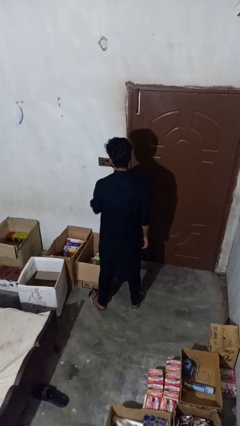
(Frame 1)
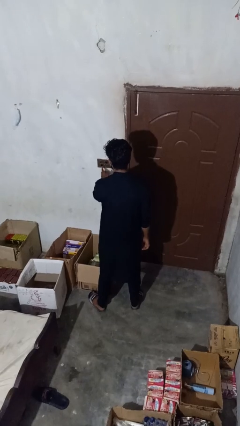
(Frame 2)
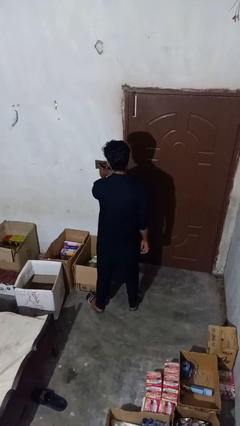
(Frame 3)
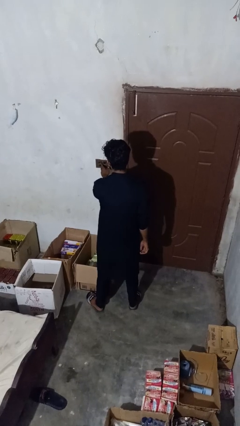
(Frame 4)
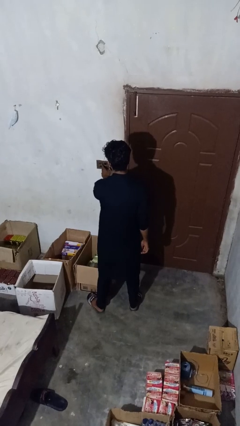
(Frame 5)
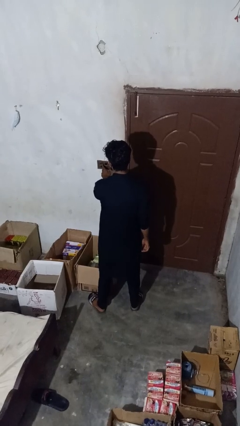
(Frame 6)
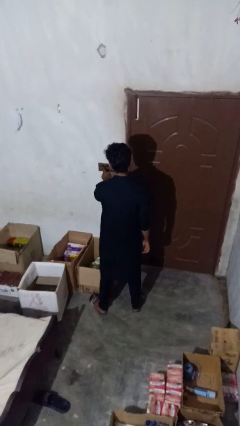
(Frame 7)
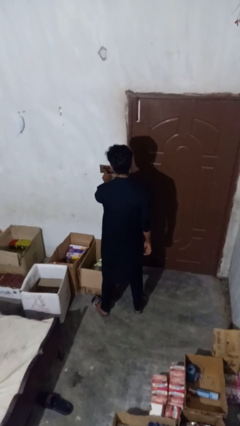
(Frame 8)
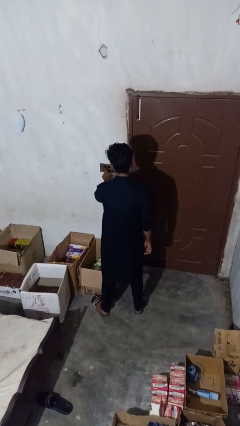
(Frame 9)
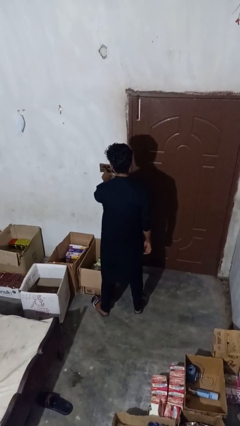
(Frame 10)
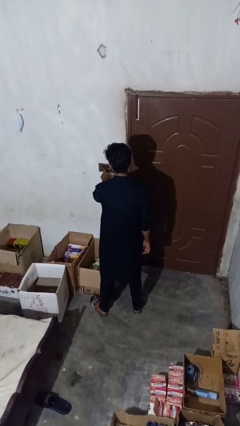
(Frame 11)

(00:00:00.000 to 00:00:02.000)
person turns on fan

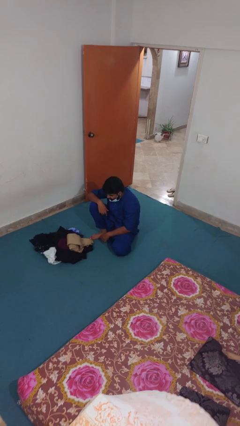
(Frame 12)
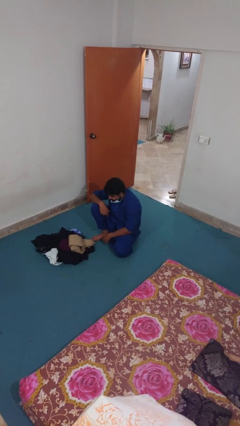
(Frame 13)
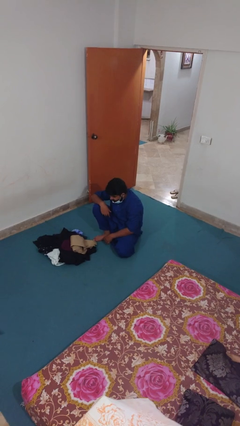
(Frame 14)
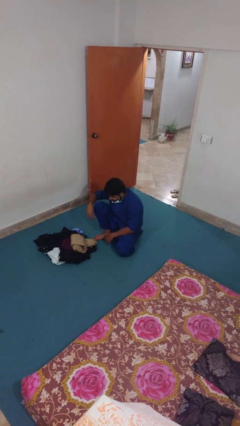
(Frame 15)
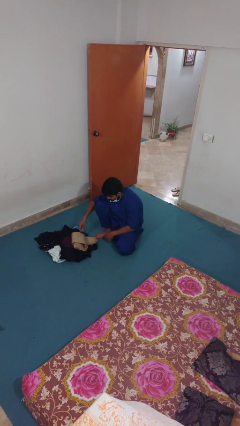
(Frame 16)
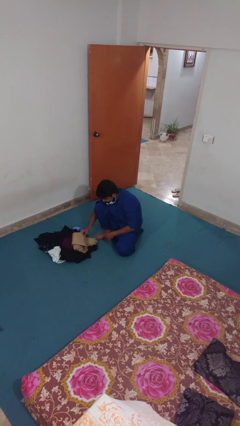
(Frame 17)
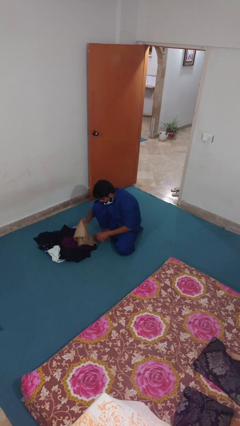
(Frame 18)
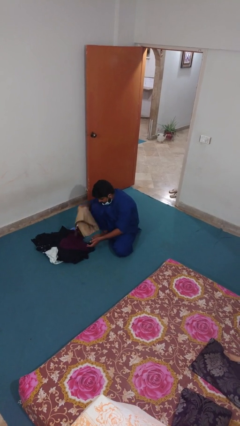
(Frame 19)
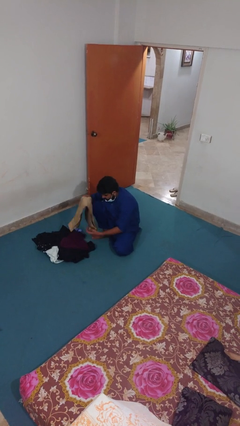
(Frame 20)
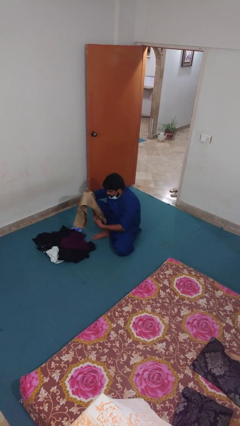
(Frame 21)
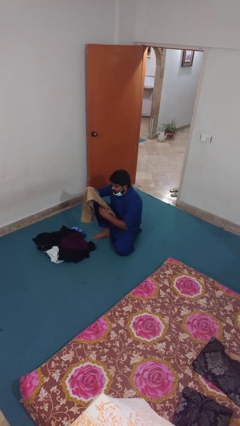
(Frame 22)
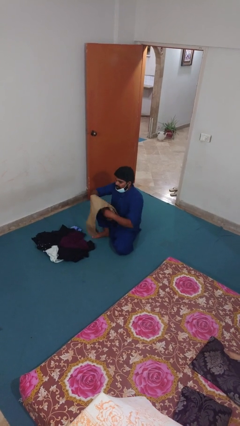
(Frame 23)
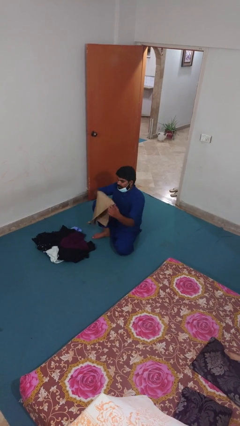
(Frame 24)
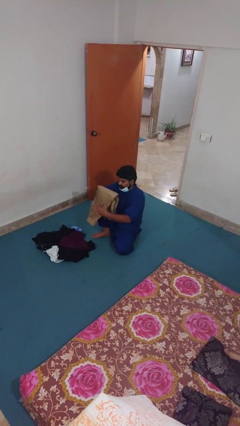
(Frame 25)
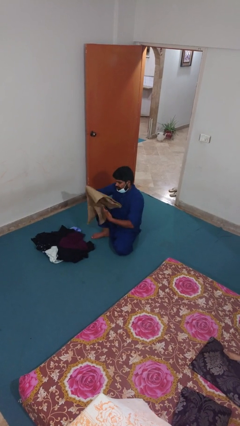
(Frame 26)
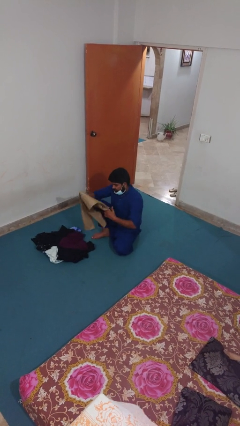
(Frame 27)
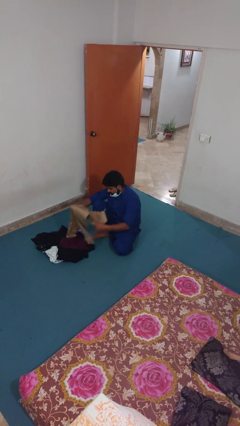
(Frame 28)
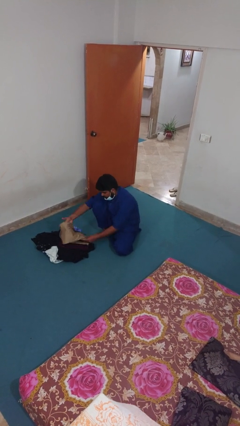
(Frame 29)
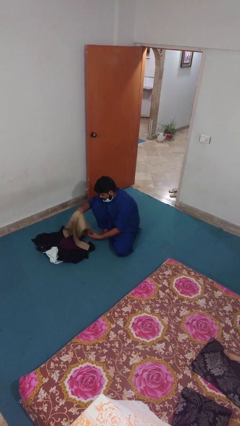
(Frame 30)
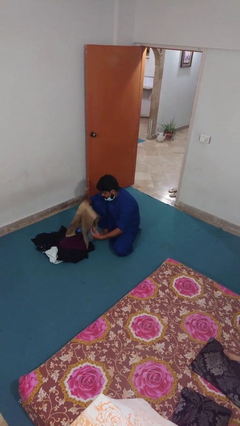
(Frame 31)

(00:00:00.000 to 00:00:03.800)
person folds pants

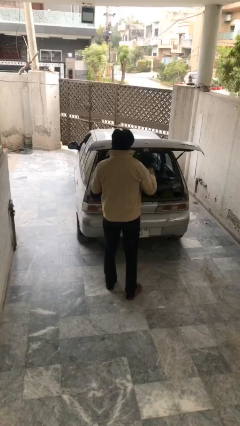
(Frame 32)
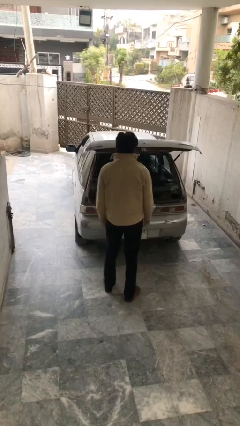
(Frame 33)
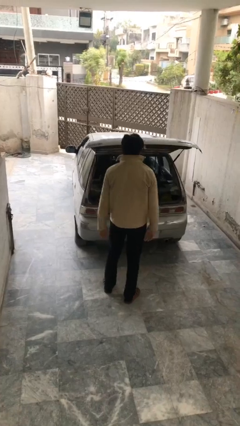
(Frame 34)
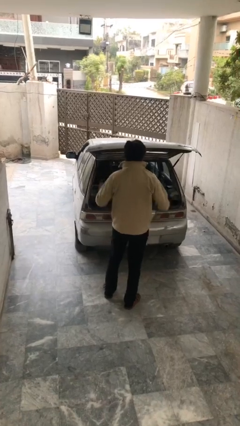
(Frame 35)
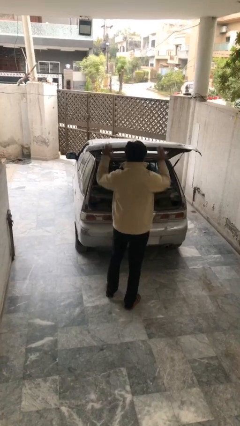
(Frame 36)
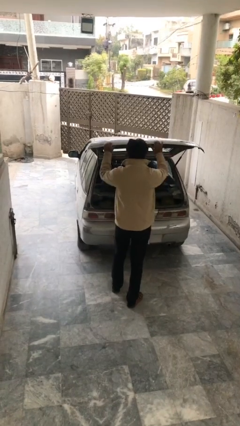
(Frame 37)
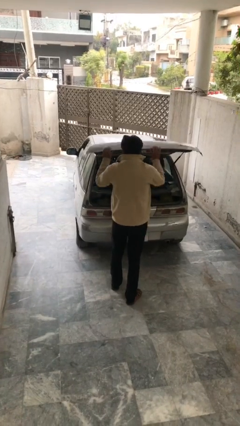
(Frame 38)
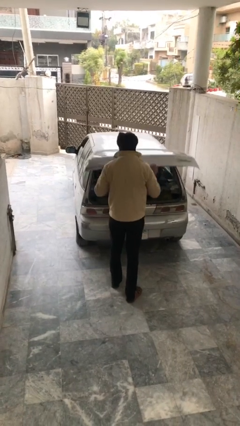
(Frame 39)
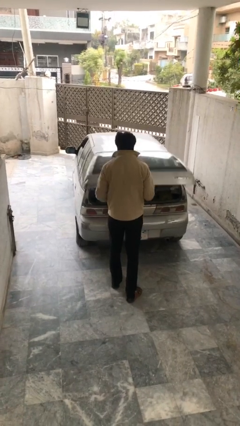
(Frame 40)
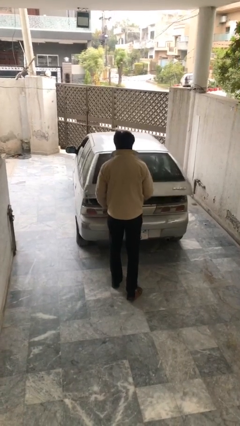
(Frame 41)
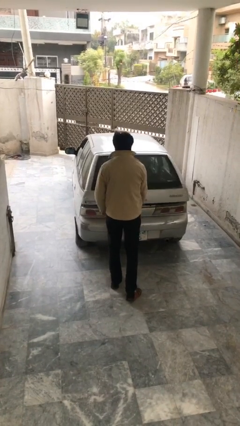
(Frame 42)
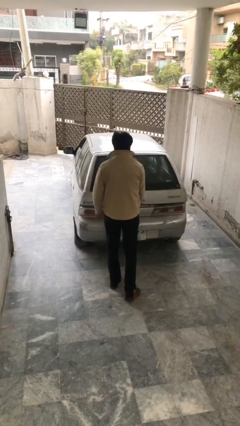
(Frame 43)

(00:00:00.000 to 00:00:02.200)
person closes car trunk

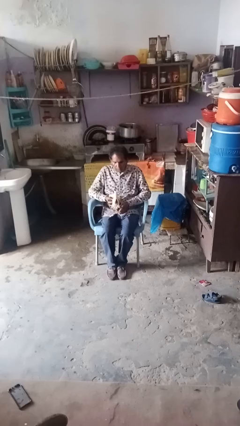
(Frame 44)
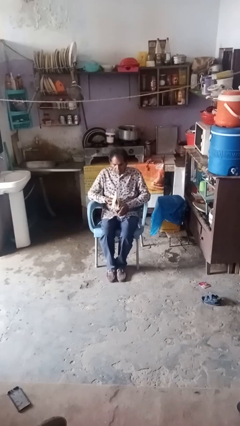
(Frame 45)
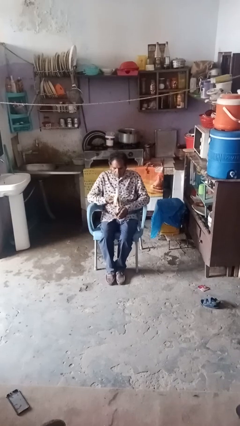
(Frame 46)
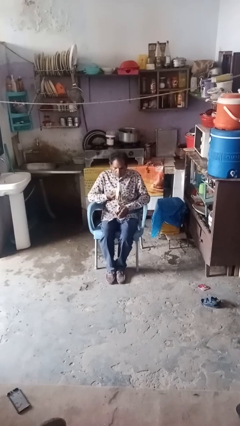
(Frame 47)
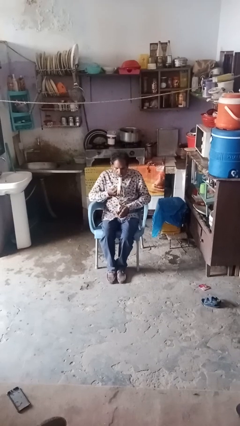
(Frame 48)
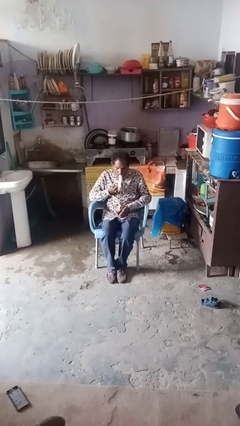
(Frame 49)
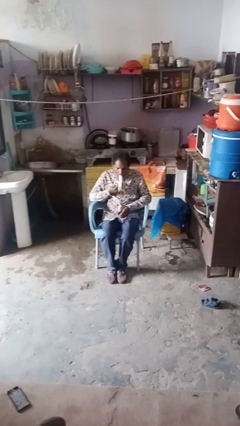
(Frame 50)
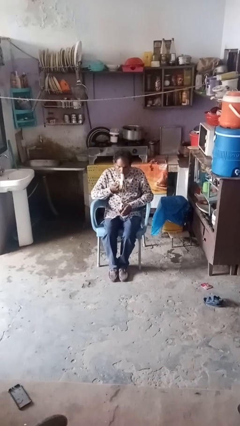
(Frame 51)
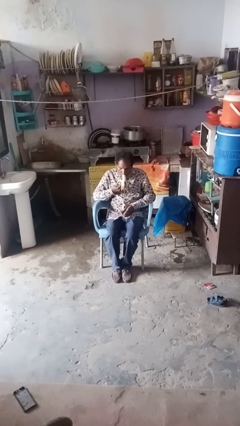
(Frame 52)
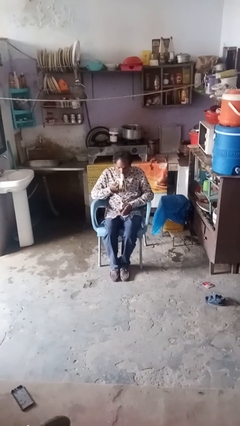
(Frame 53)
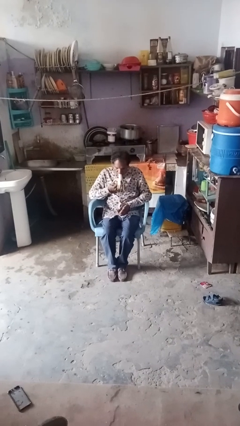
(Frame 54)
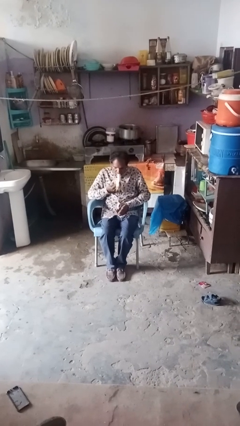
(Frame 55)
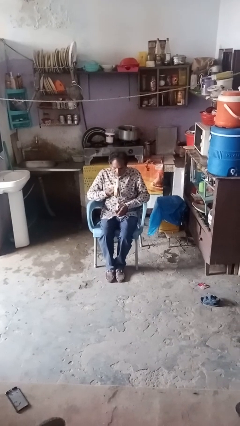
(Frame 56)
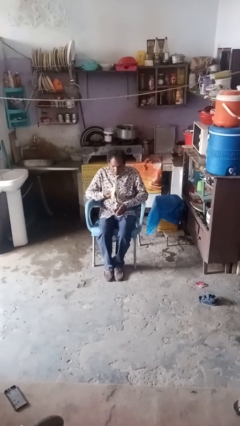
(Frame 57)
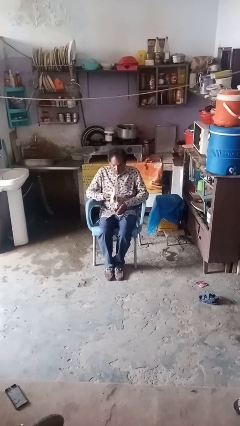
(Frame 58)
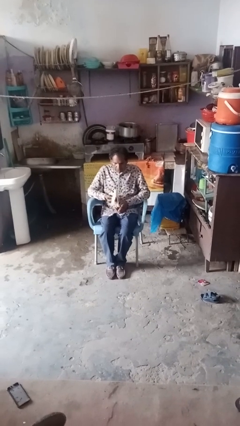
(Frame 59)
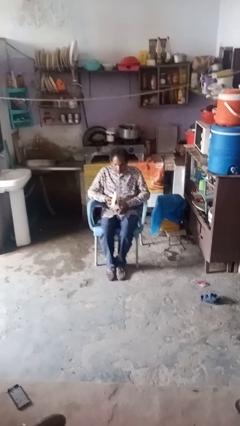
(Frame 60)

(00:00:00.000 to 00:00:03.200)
person eats banana

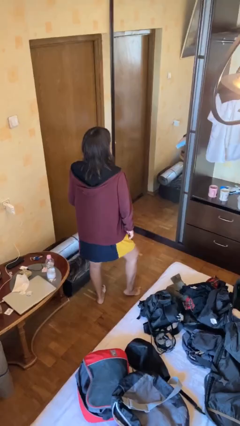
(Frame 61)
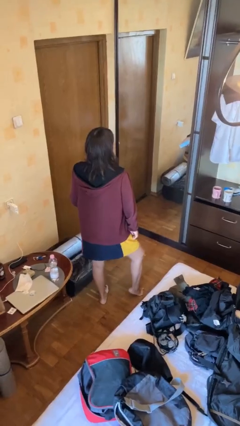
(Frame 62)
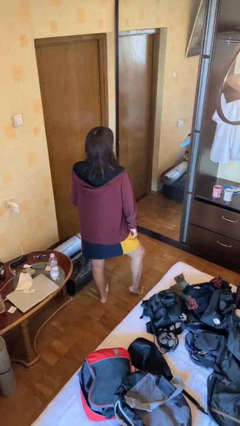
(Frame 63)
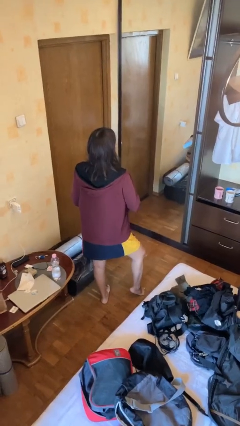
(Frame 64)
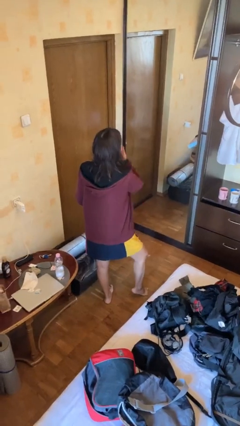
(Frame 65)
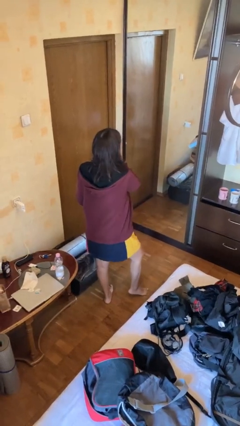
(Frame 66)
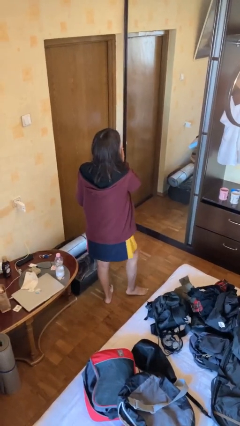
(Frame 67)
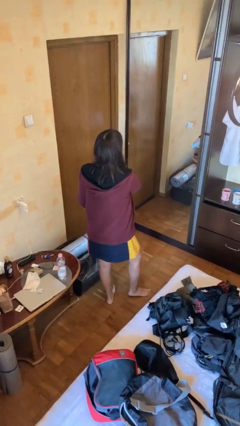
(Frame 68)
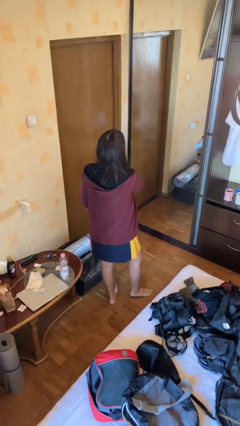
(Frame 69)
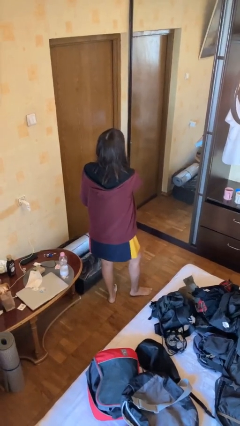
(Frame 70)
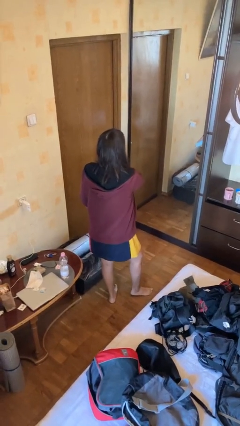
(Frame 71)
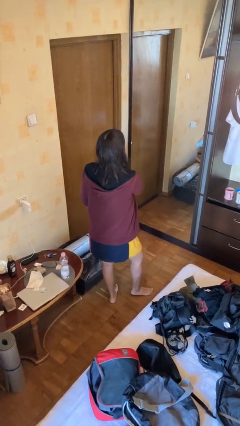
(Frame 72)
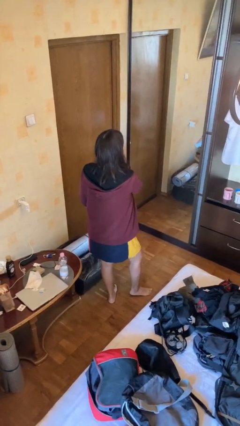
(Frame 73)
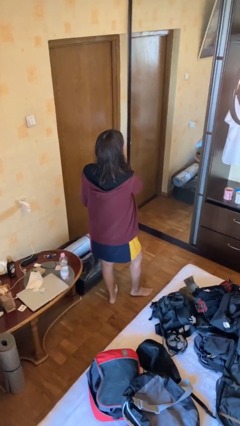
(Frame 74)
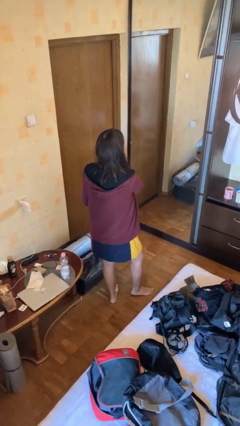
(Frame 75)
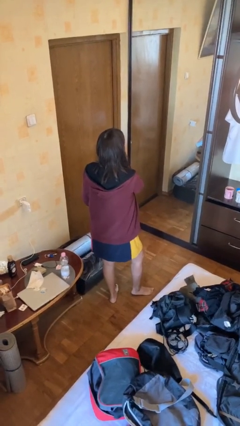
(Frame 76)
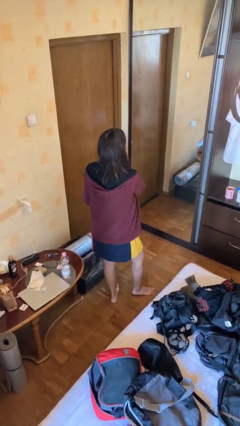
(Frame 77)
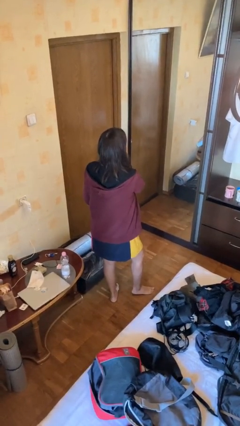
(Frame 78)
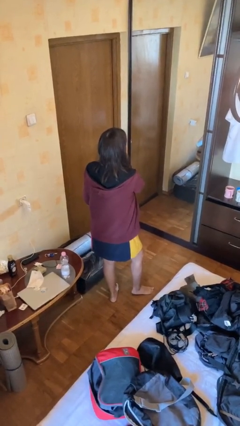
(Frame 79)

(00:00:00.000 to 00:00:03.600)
person scratches face

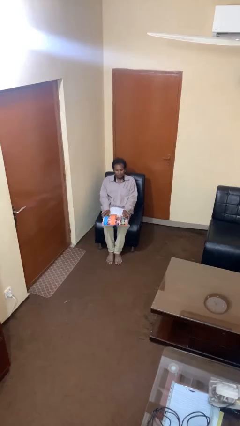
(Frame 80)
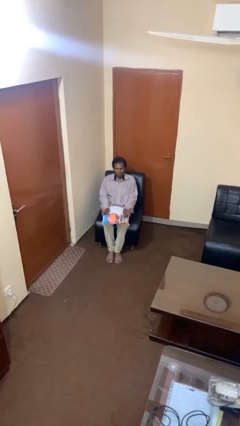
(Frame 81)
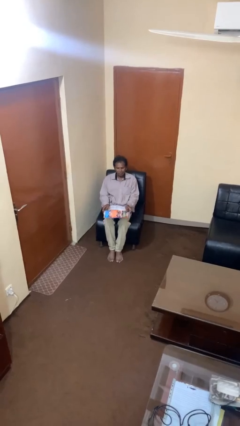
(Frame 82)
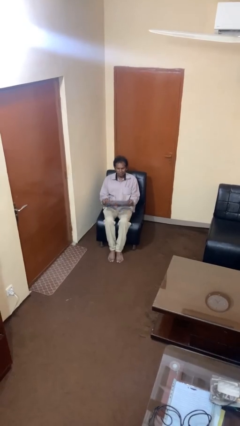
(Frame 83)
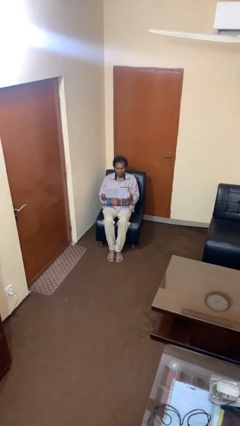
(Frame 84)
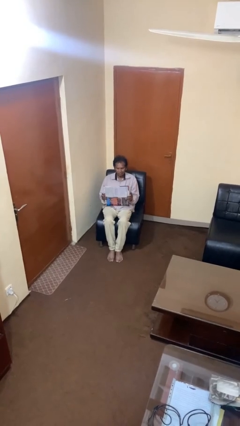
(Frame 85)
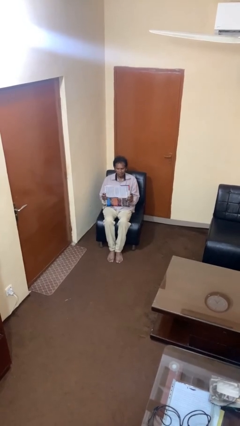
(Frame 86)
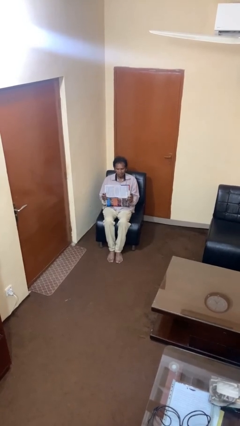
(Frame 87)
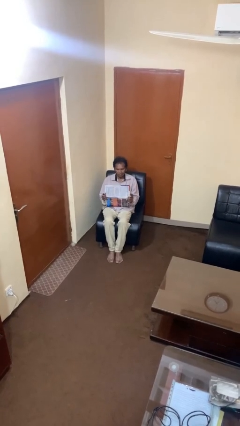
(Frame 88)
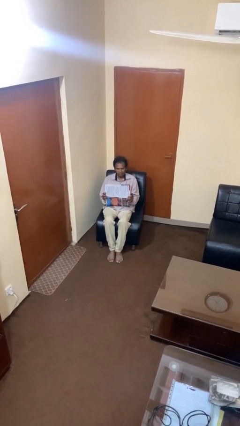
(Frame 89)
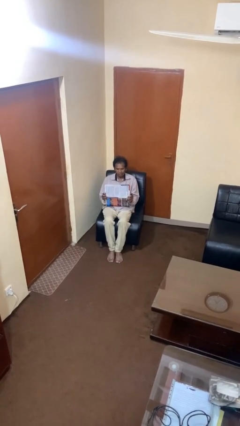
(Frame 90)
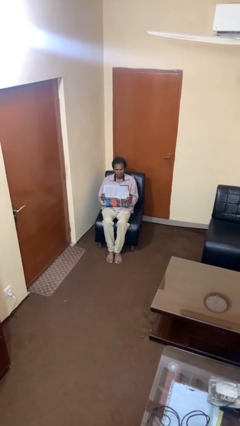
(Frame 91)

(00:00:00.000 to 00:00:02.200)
person reads newspaper

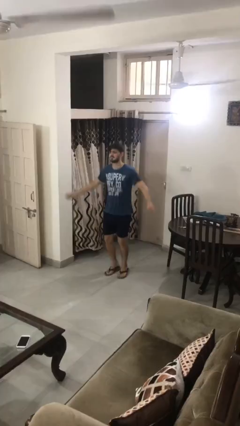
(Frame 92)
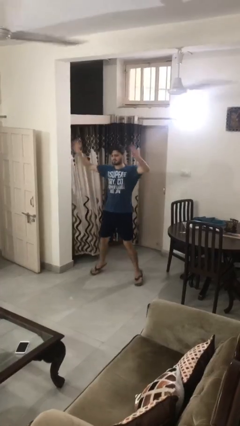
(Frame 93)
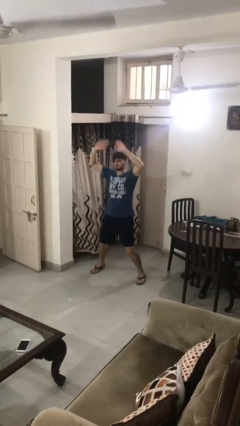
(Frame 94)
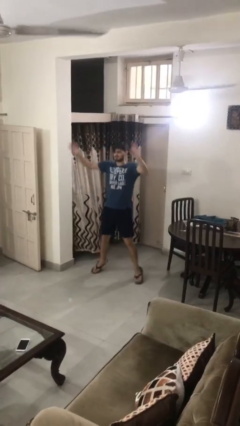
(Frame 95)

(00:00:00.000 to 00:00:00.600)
person exercises with jumping jacks
